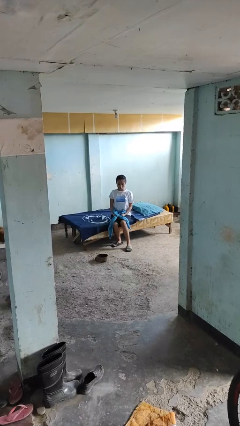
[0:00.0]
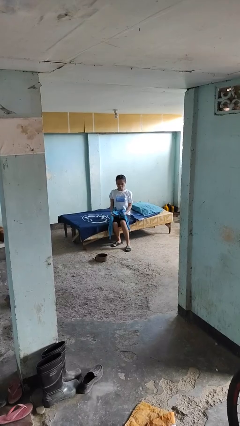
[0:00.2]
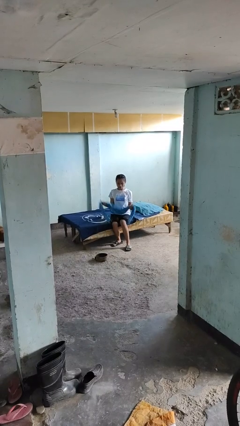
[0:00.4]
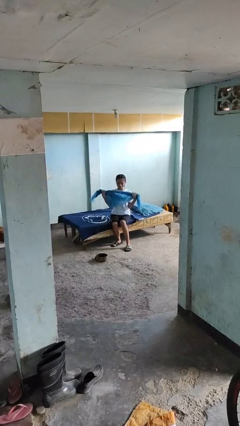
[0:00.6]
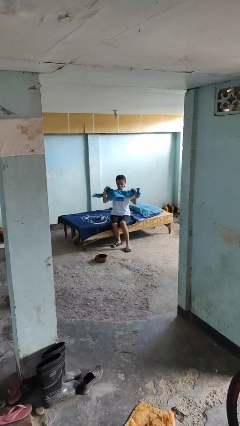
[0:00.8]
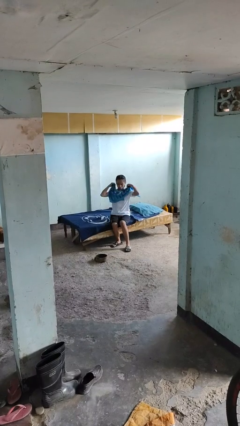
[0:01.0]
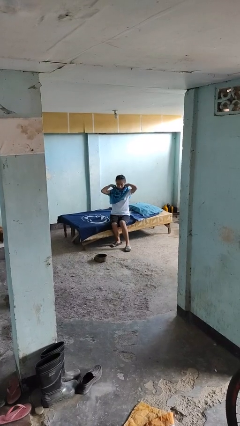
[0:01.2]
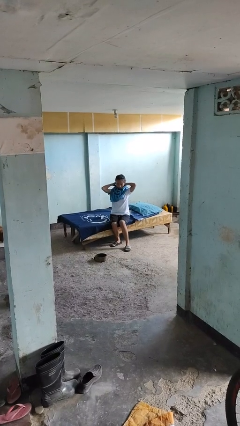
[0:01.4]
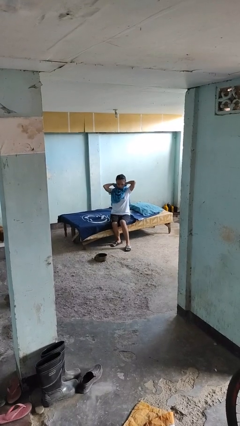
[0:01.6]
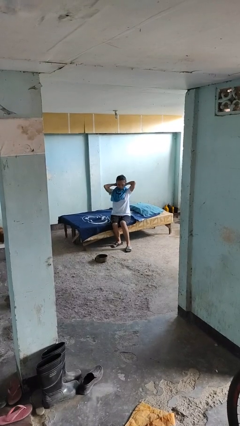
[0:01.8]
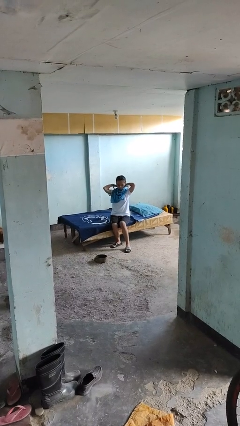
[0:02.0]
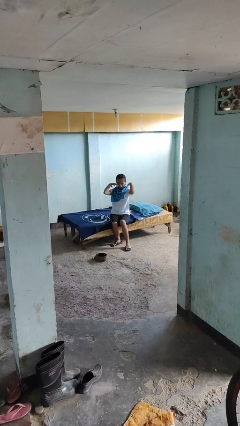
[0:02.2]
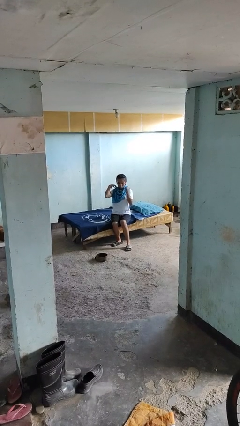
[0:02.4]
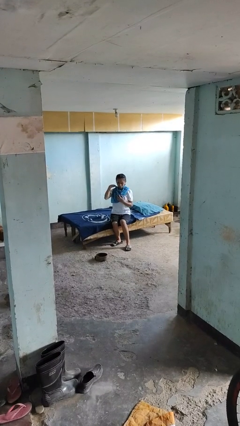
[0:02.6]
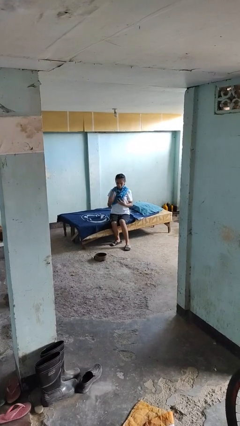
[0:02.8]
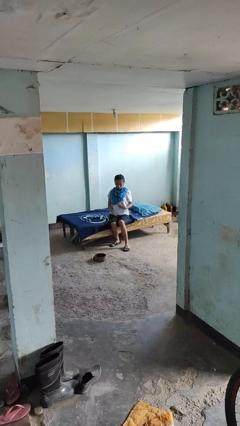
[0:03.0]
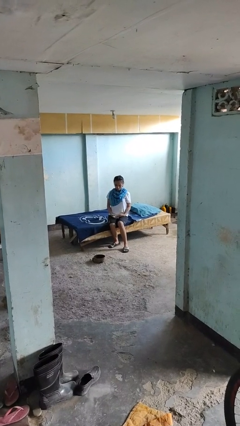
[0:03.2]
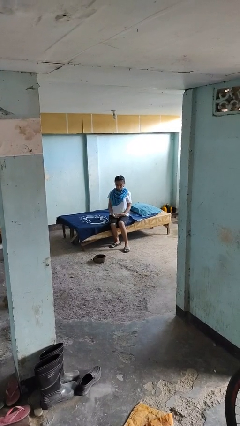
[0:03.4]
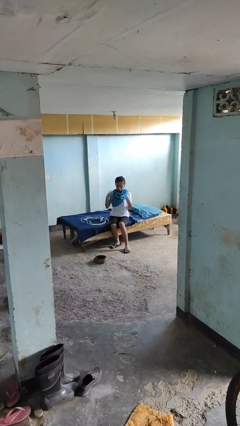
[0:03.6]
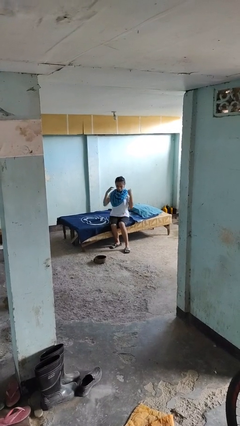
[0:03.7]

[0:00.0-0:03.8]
person puts on scarf

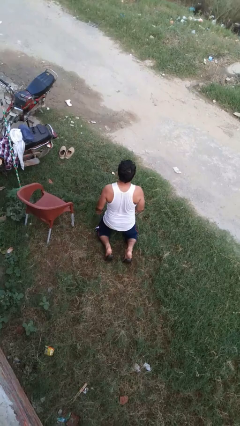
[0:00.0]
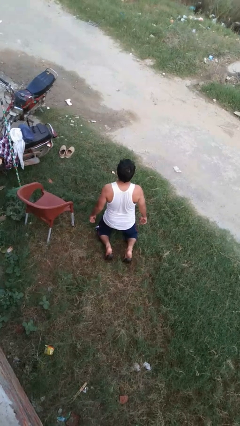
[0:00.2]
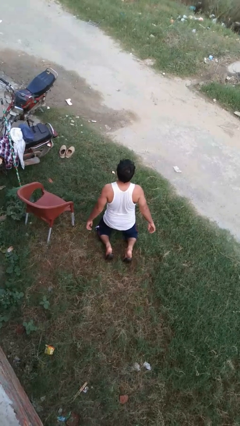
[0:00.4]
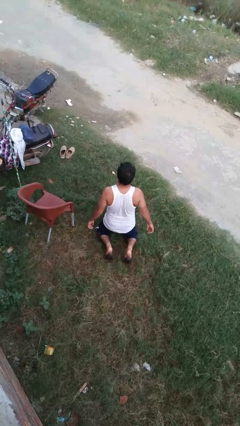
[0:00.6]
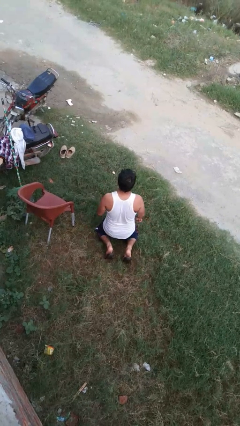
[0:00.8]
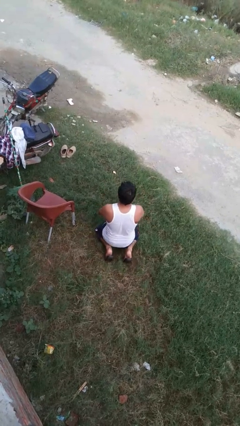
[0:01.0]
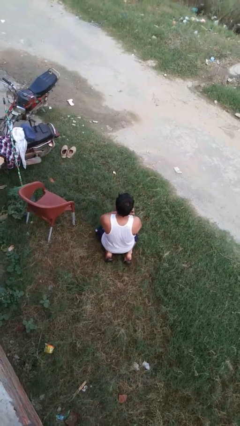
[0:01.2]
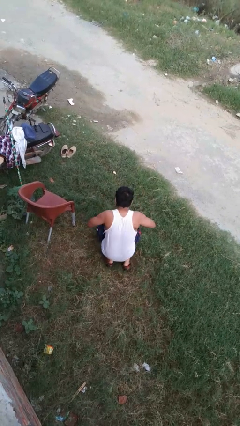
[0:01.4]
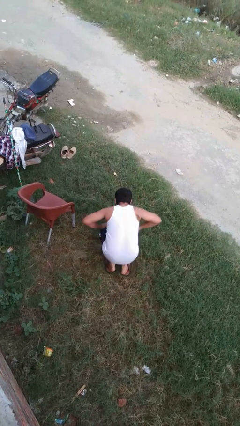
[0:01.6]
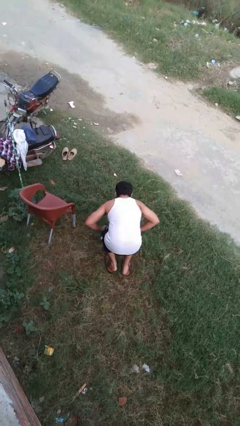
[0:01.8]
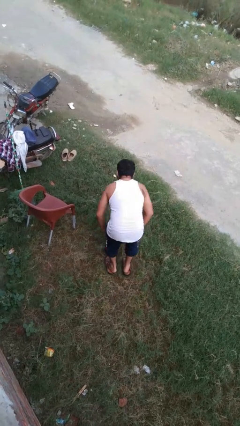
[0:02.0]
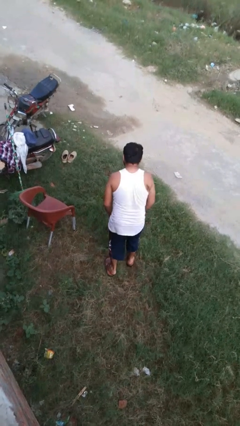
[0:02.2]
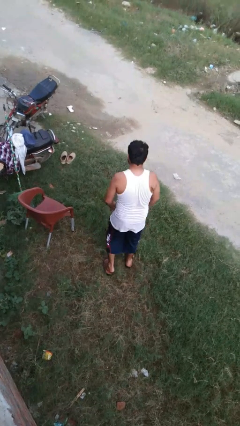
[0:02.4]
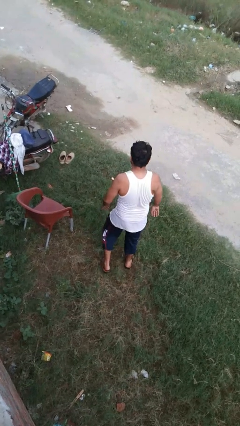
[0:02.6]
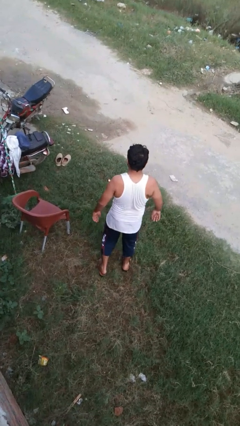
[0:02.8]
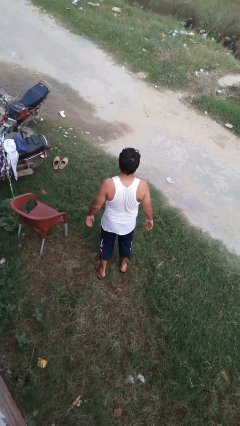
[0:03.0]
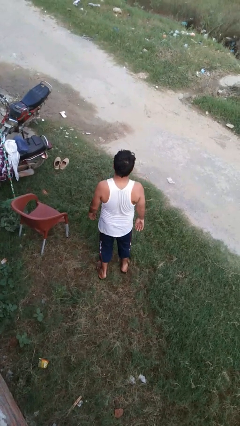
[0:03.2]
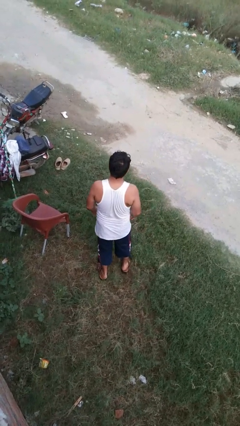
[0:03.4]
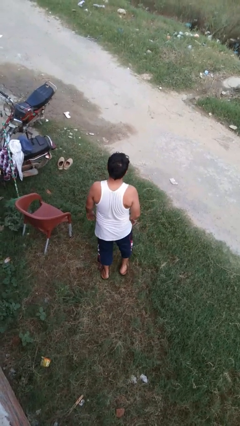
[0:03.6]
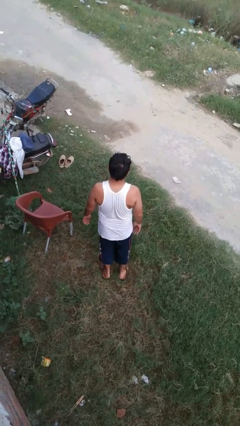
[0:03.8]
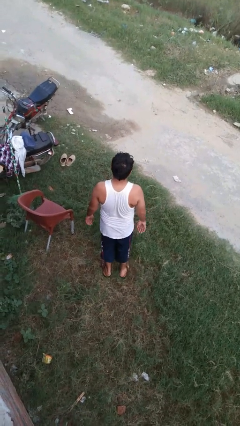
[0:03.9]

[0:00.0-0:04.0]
person stands up from floor

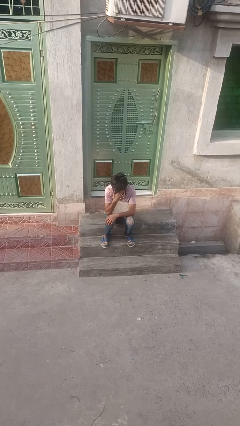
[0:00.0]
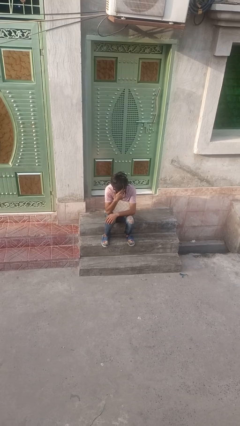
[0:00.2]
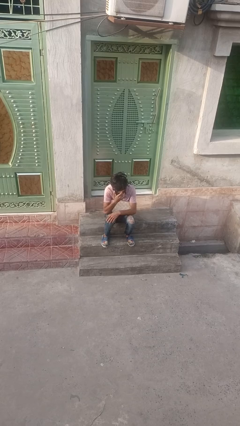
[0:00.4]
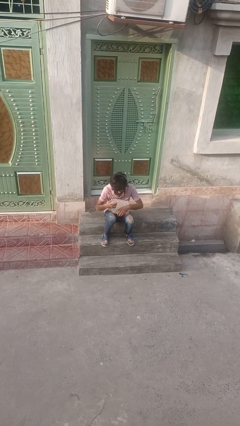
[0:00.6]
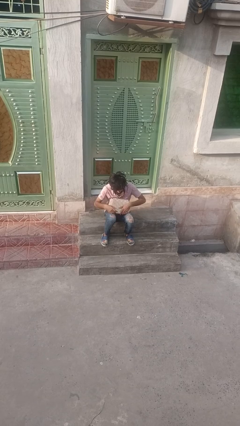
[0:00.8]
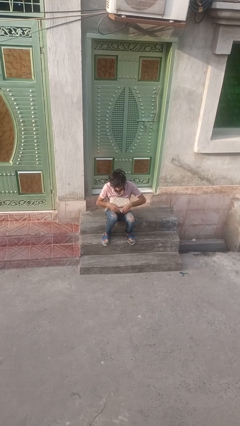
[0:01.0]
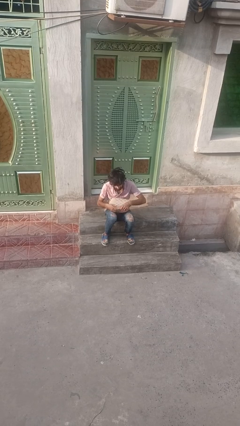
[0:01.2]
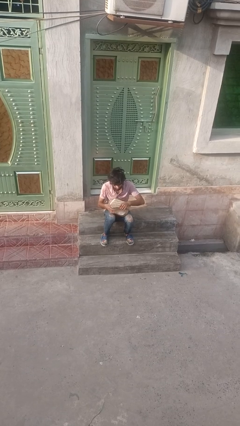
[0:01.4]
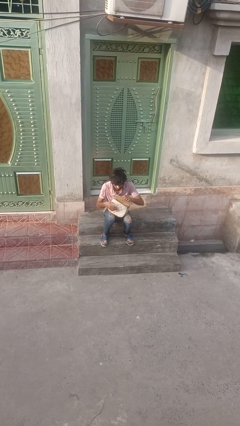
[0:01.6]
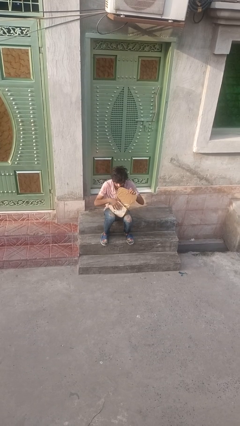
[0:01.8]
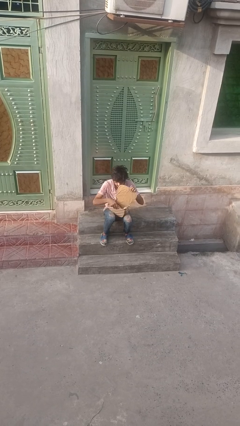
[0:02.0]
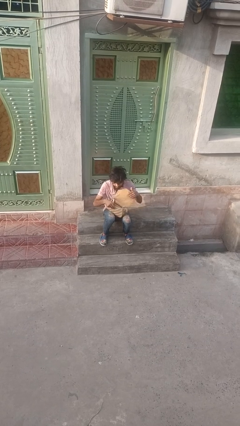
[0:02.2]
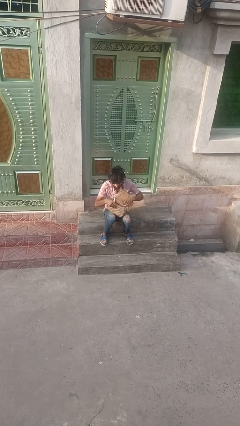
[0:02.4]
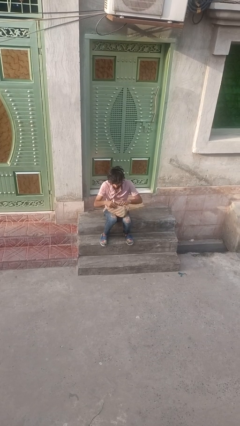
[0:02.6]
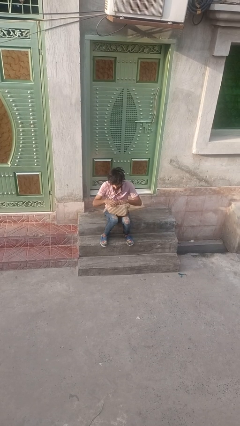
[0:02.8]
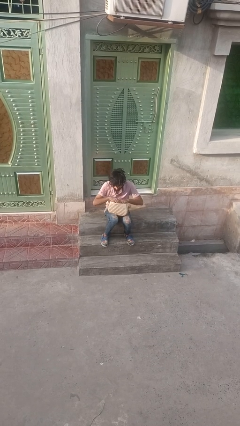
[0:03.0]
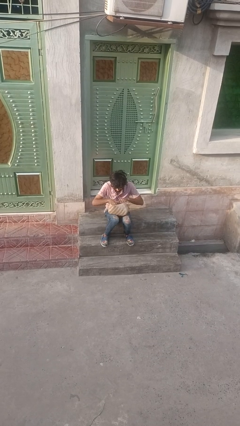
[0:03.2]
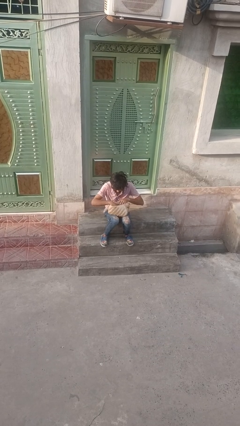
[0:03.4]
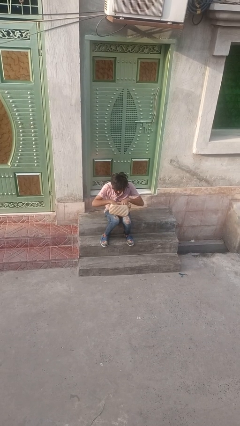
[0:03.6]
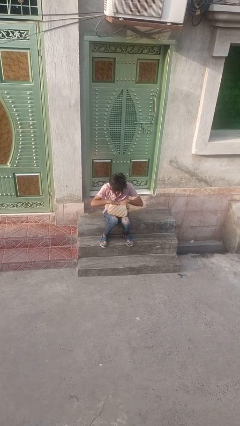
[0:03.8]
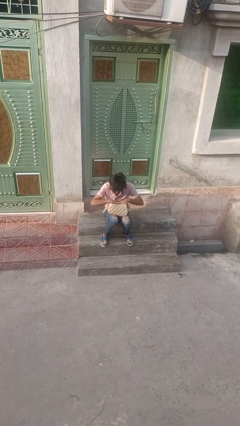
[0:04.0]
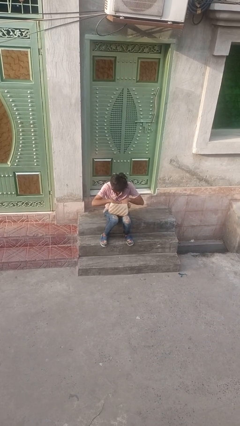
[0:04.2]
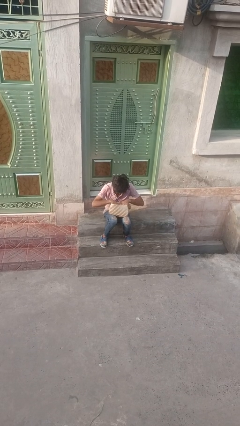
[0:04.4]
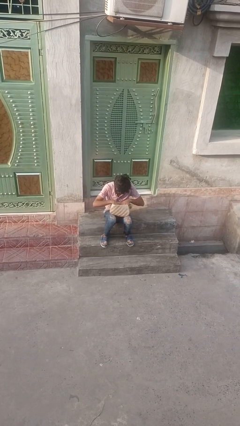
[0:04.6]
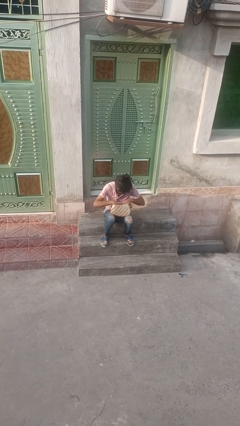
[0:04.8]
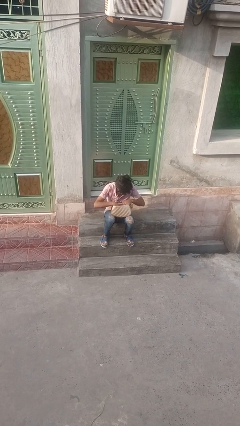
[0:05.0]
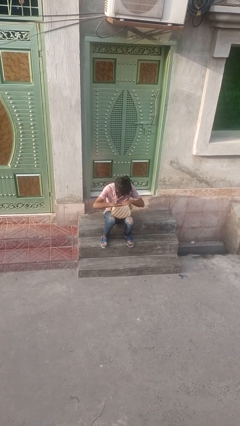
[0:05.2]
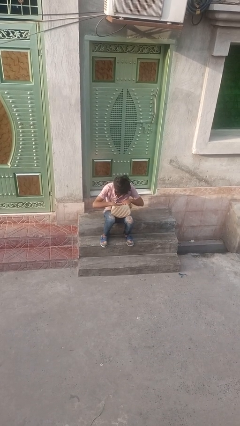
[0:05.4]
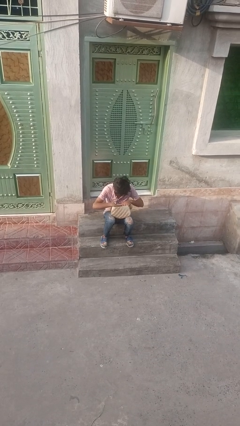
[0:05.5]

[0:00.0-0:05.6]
person searches in backpack

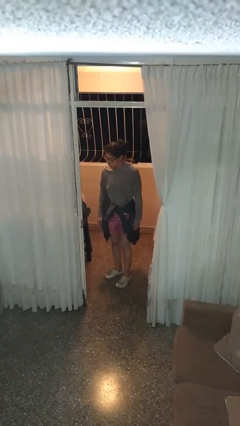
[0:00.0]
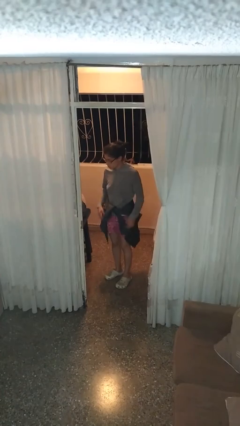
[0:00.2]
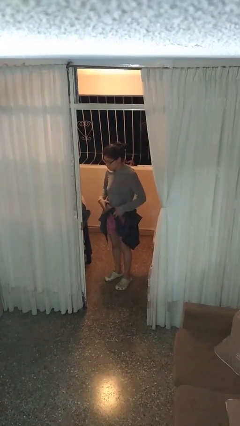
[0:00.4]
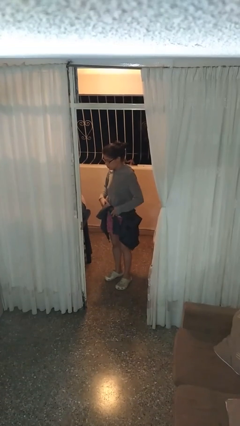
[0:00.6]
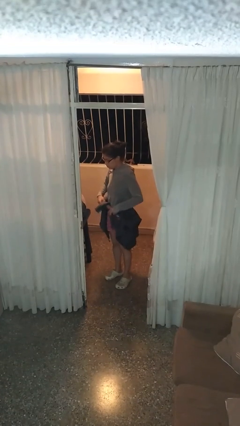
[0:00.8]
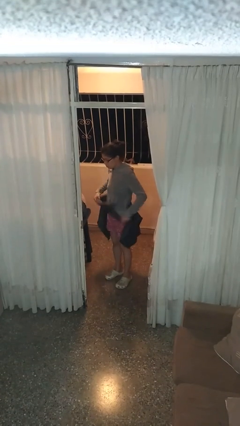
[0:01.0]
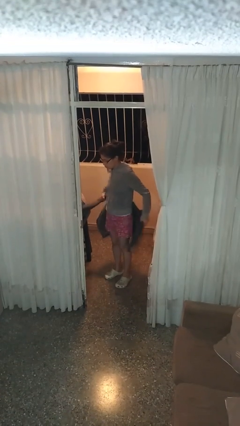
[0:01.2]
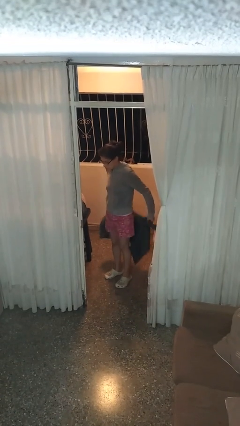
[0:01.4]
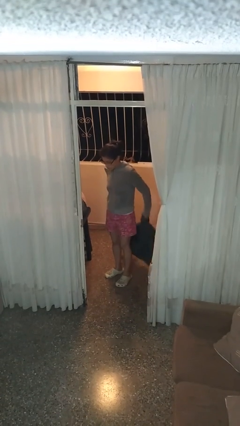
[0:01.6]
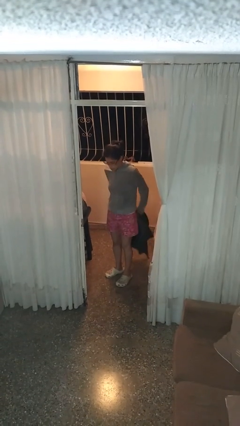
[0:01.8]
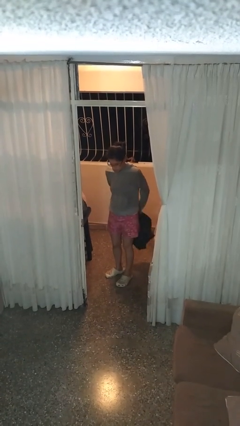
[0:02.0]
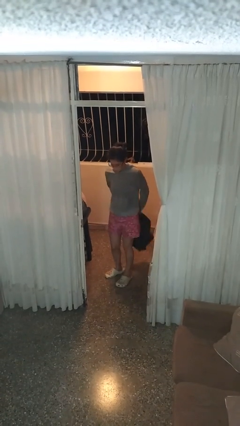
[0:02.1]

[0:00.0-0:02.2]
person unties jacket around waist

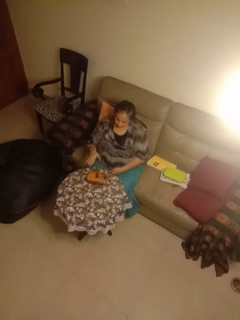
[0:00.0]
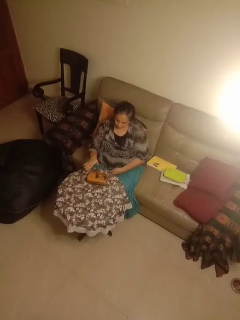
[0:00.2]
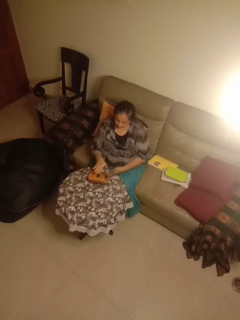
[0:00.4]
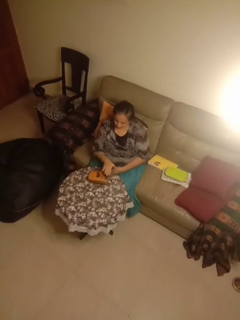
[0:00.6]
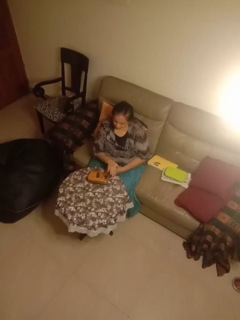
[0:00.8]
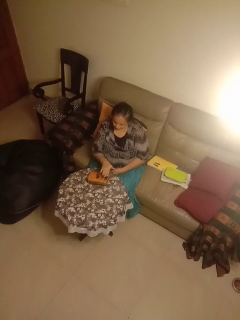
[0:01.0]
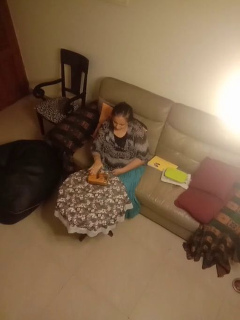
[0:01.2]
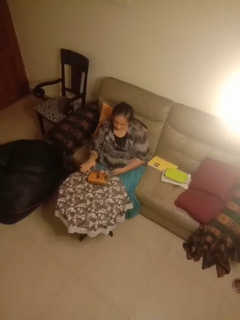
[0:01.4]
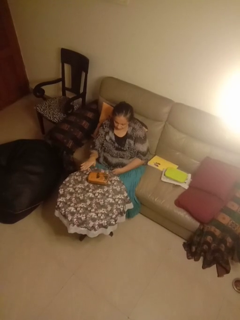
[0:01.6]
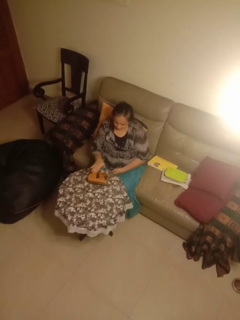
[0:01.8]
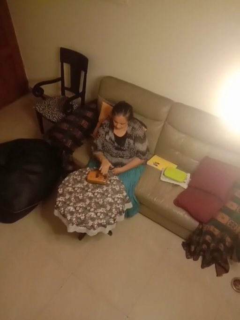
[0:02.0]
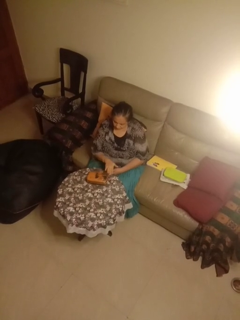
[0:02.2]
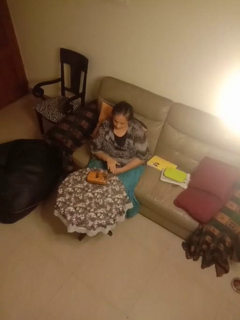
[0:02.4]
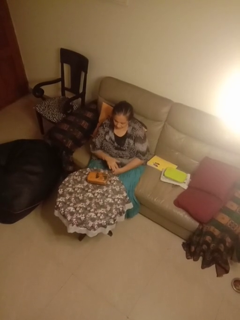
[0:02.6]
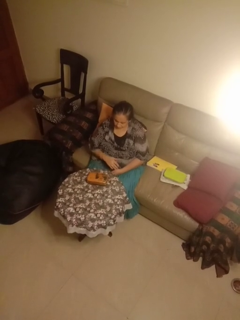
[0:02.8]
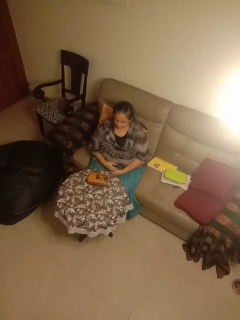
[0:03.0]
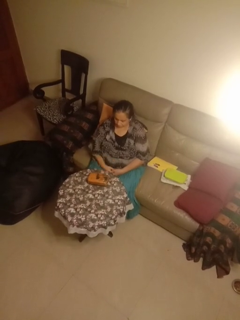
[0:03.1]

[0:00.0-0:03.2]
person waves hand over object
